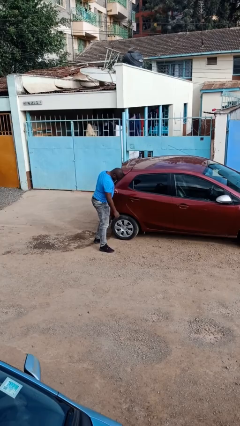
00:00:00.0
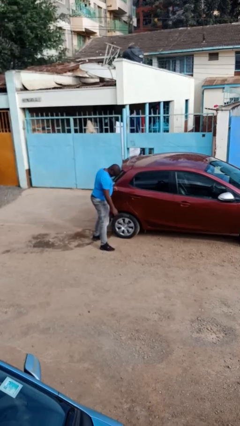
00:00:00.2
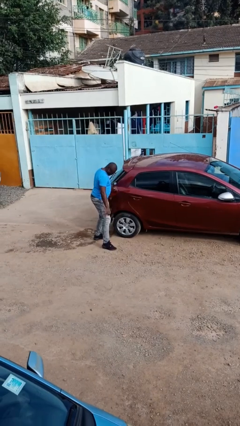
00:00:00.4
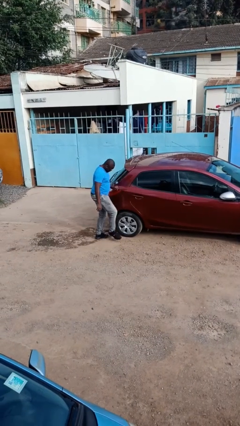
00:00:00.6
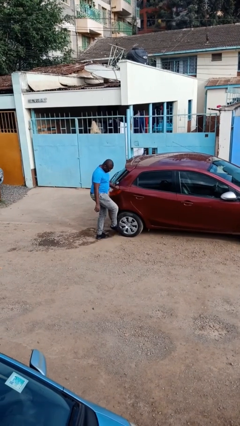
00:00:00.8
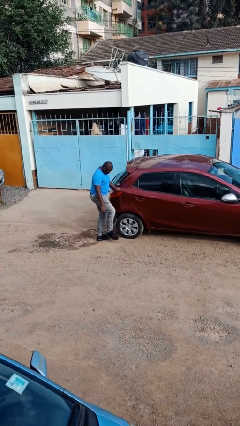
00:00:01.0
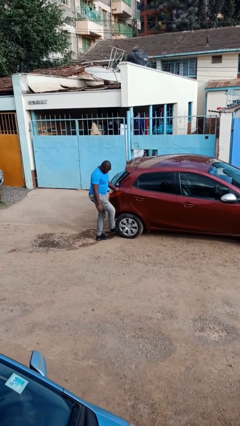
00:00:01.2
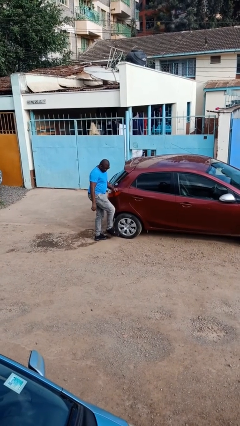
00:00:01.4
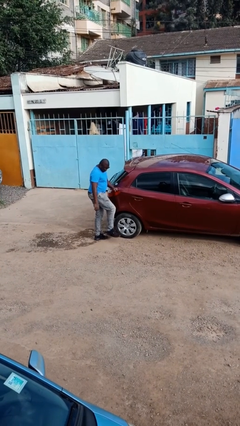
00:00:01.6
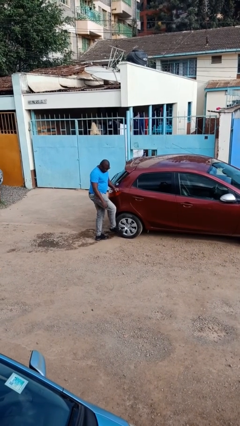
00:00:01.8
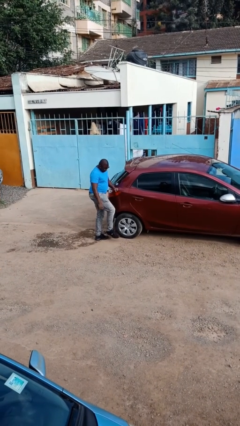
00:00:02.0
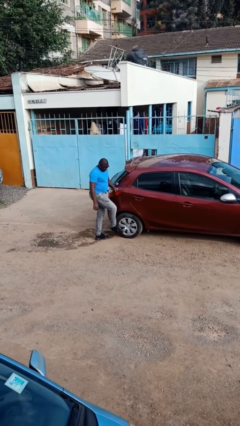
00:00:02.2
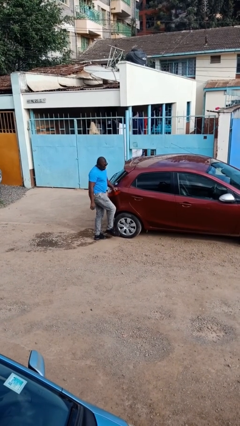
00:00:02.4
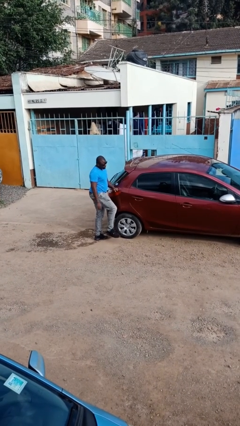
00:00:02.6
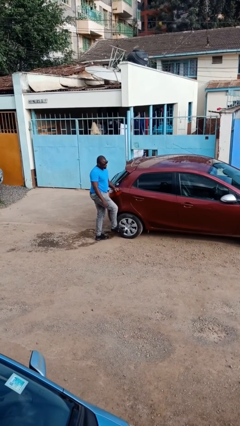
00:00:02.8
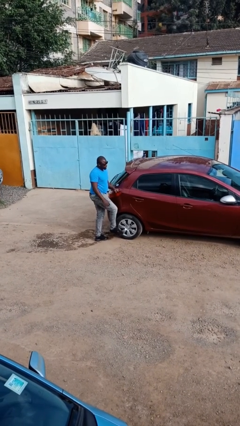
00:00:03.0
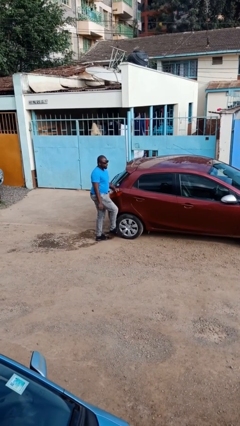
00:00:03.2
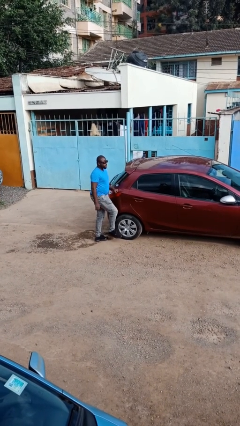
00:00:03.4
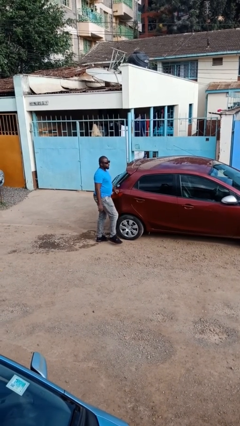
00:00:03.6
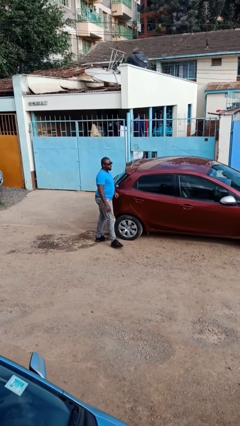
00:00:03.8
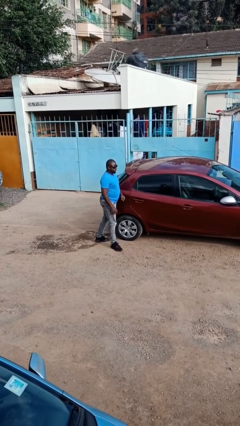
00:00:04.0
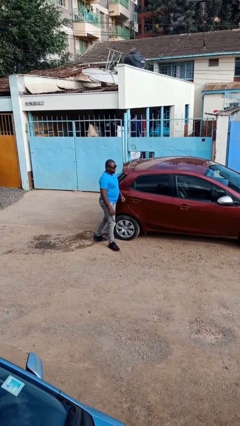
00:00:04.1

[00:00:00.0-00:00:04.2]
person kicks car tires

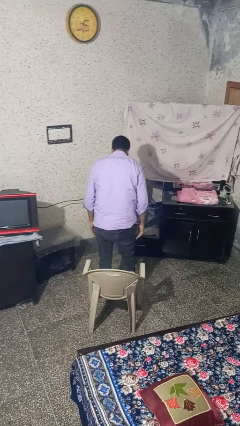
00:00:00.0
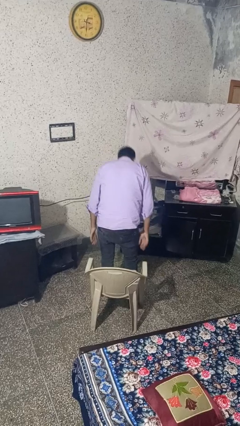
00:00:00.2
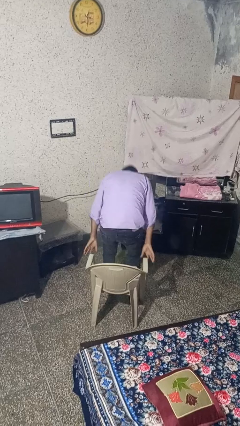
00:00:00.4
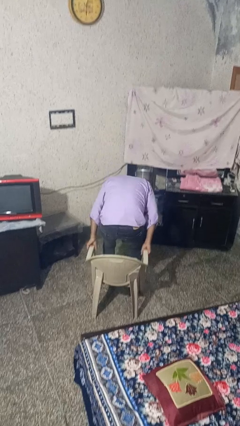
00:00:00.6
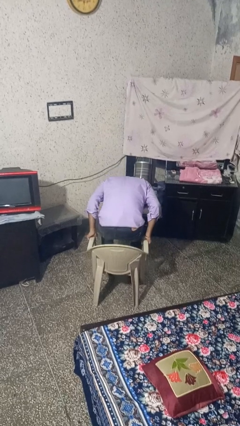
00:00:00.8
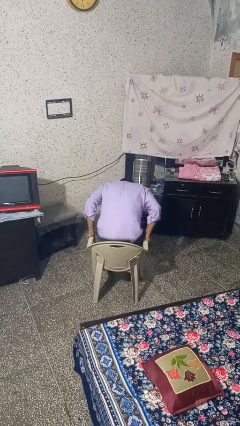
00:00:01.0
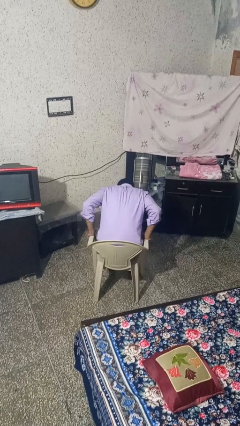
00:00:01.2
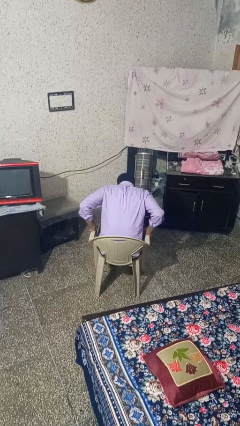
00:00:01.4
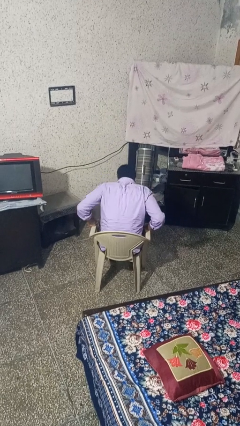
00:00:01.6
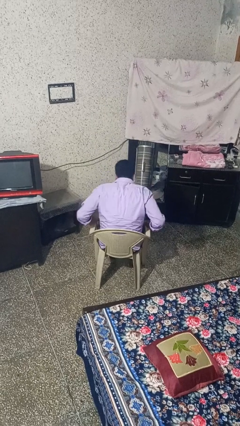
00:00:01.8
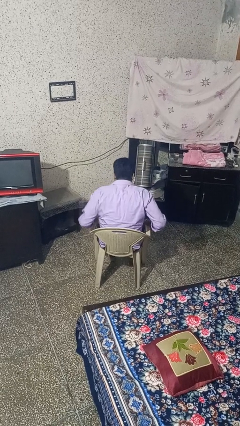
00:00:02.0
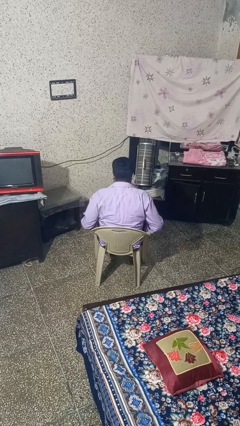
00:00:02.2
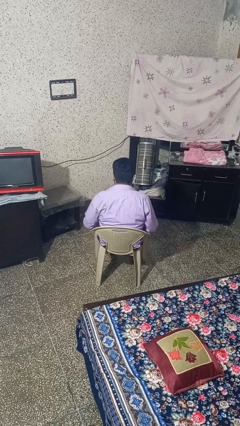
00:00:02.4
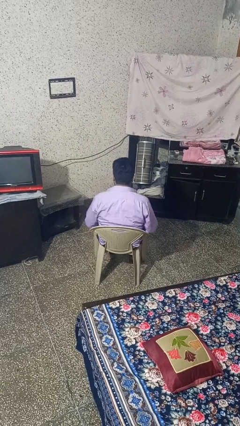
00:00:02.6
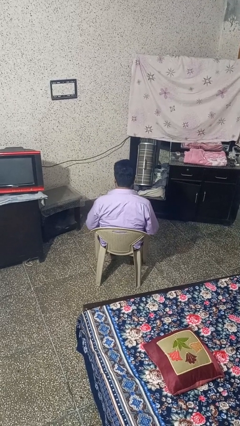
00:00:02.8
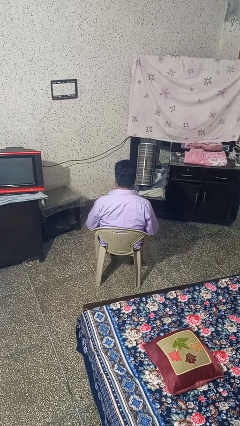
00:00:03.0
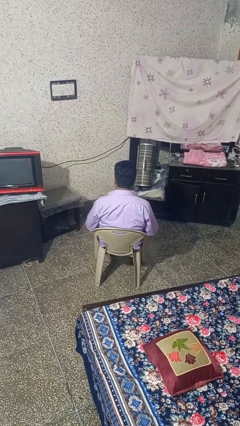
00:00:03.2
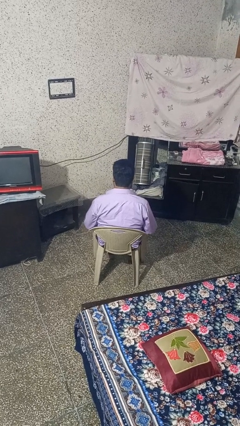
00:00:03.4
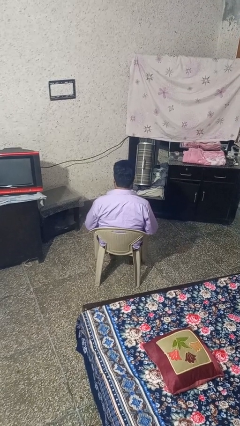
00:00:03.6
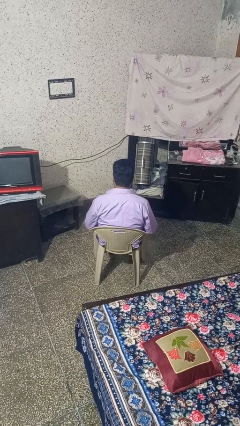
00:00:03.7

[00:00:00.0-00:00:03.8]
person sits down

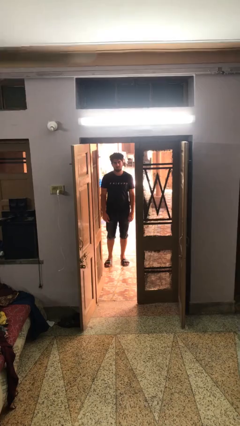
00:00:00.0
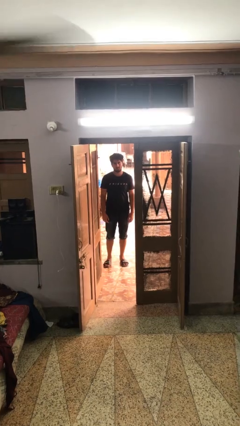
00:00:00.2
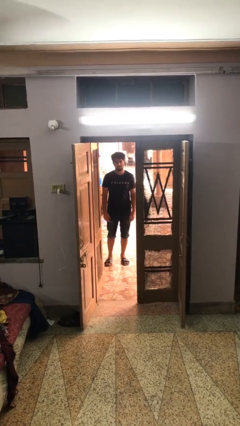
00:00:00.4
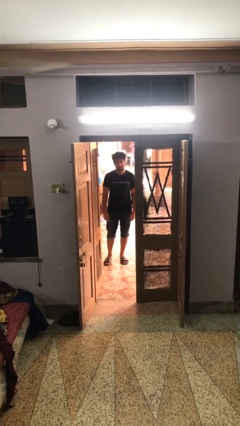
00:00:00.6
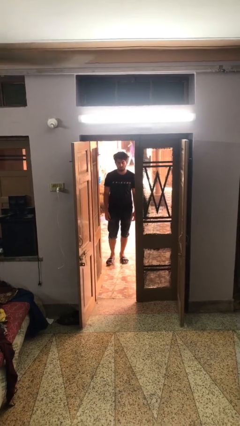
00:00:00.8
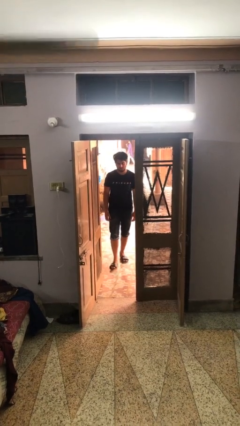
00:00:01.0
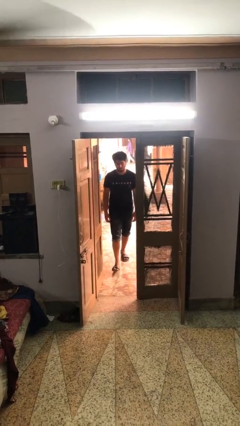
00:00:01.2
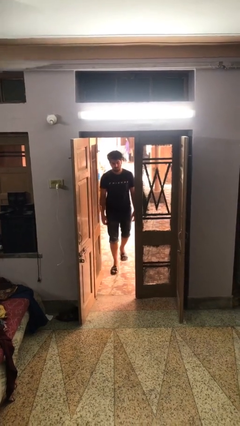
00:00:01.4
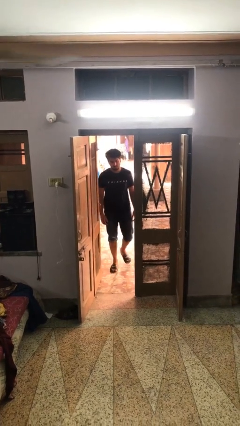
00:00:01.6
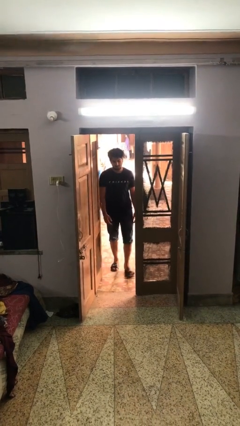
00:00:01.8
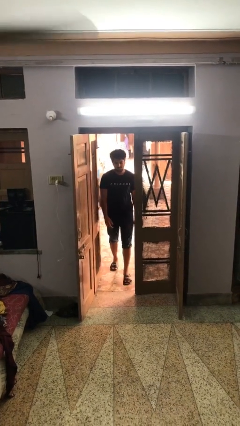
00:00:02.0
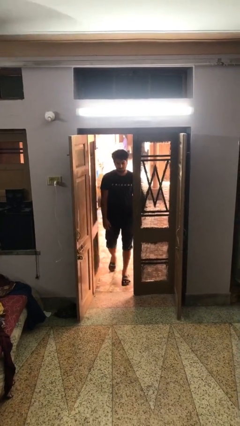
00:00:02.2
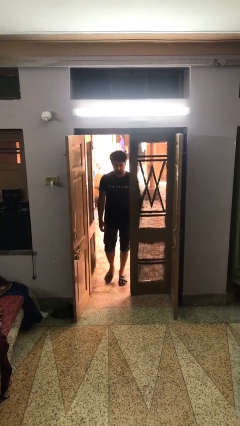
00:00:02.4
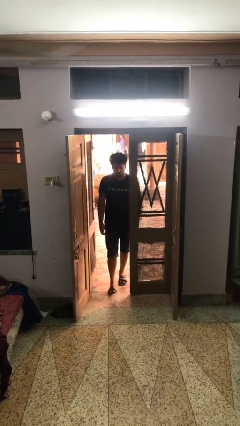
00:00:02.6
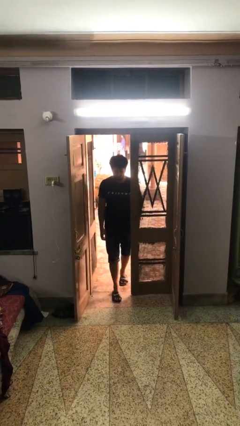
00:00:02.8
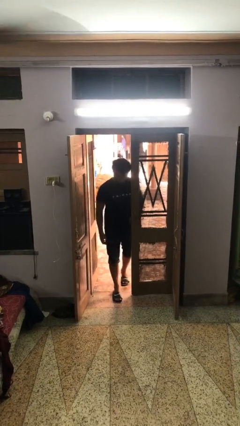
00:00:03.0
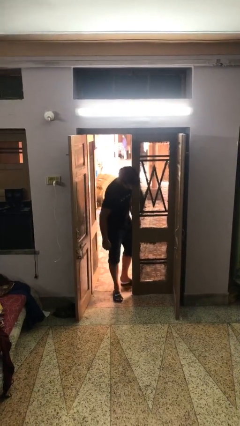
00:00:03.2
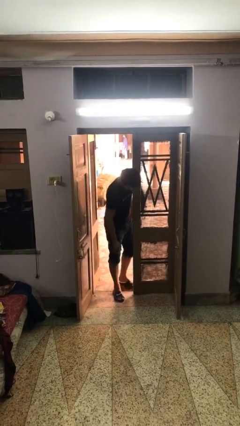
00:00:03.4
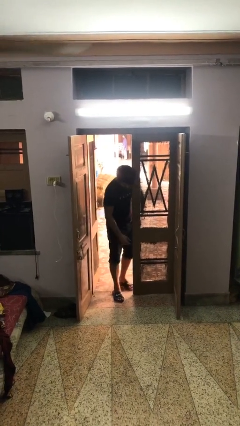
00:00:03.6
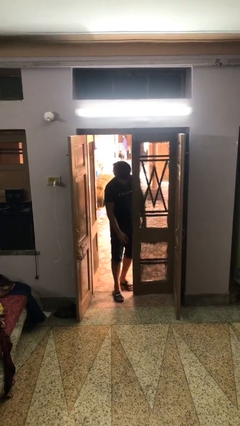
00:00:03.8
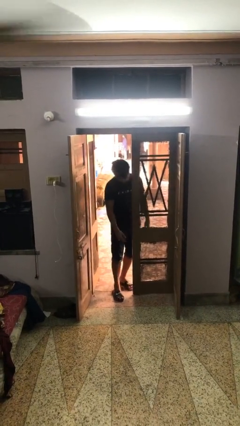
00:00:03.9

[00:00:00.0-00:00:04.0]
person bumps into wall

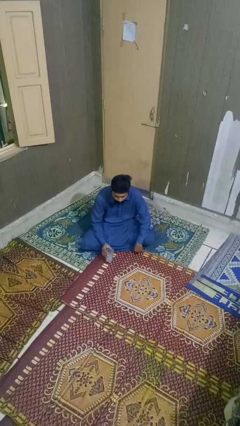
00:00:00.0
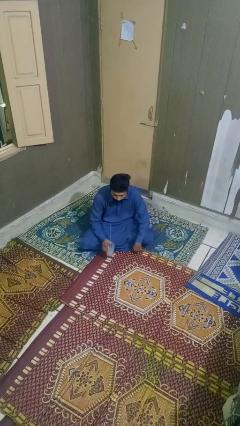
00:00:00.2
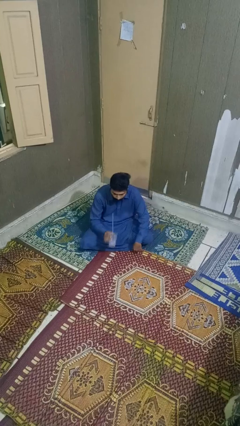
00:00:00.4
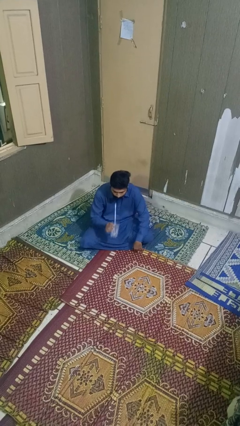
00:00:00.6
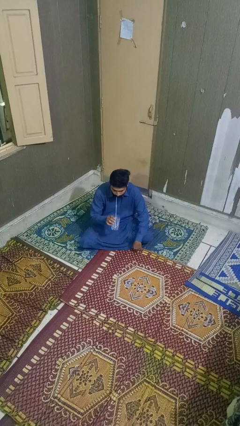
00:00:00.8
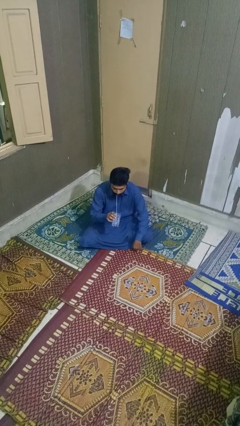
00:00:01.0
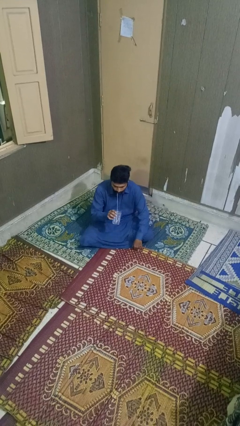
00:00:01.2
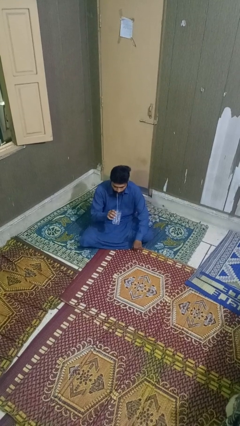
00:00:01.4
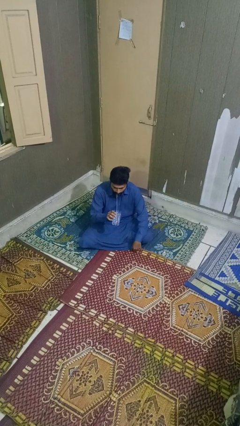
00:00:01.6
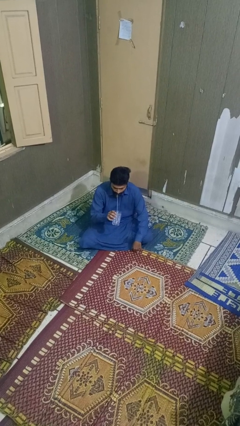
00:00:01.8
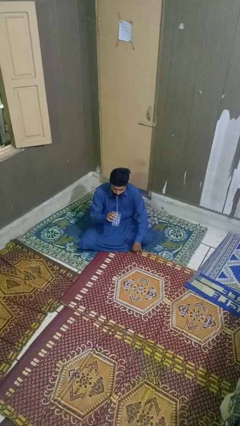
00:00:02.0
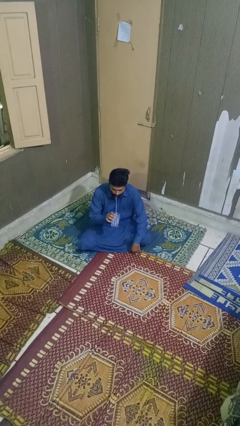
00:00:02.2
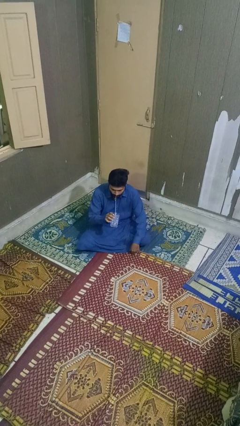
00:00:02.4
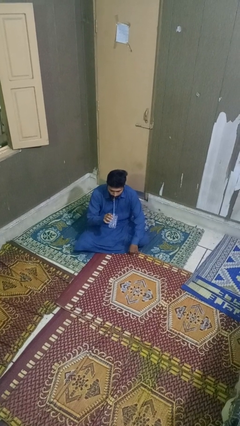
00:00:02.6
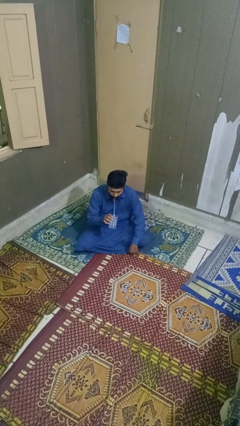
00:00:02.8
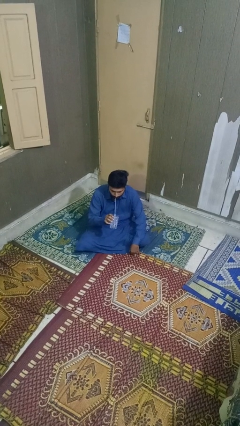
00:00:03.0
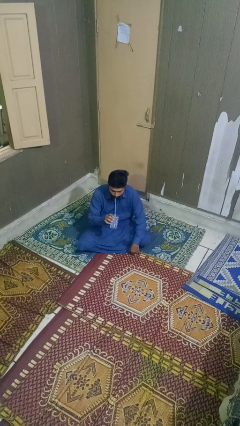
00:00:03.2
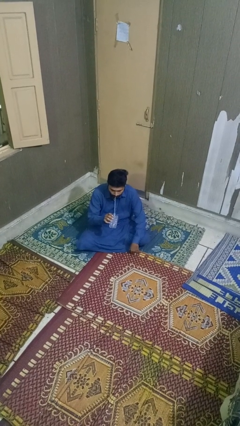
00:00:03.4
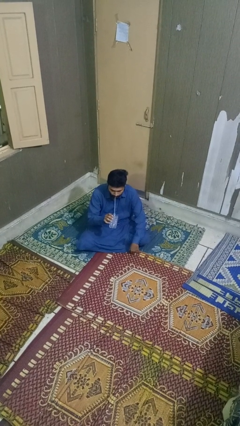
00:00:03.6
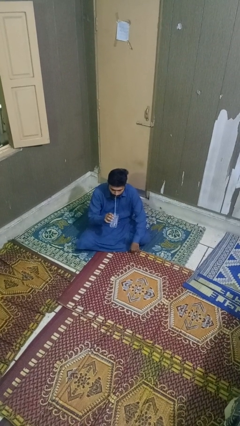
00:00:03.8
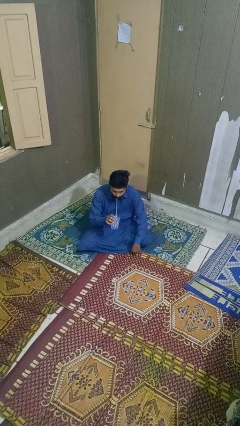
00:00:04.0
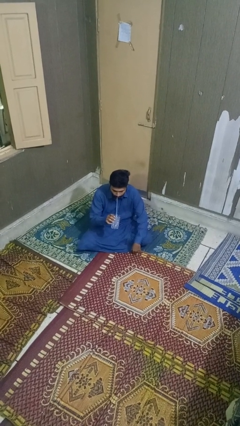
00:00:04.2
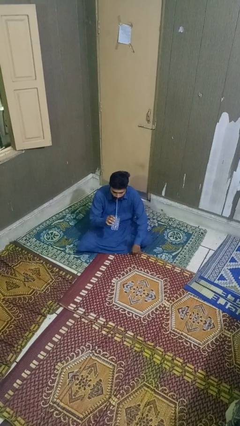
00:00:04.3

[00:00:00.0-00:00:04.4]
person drinks from straw

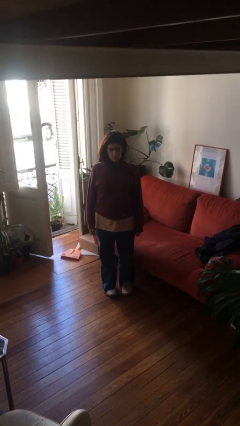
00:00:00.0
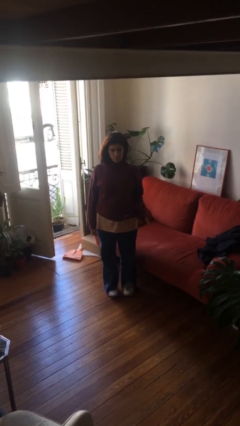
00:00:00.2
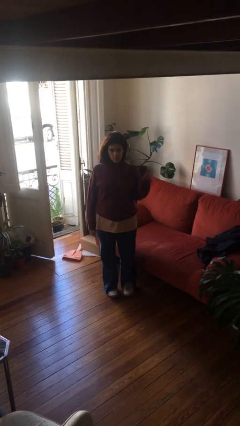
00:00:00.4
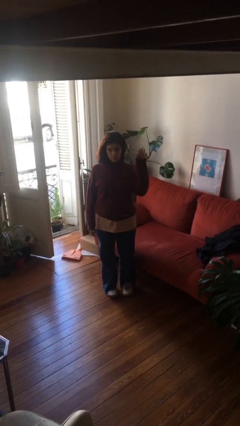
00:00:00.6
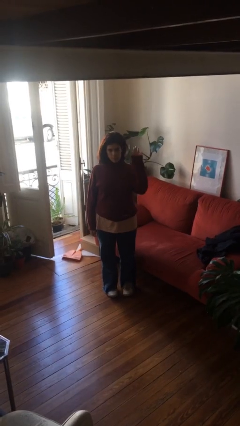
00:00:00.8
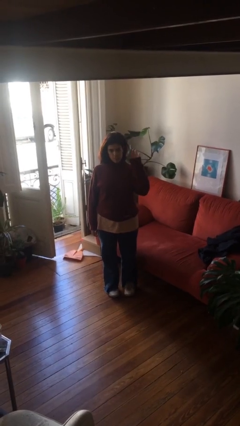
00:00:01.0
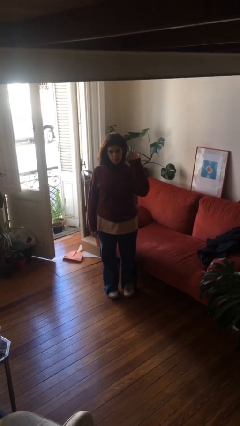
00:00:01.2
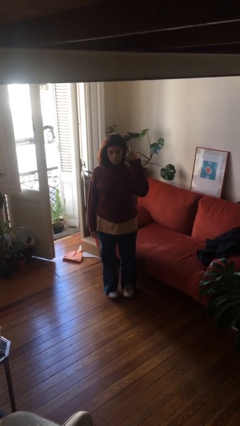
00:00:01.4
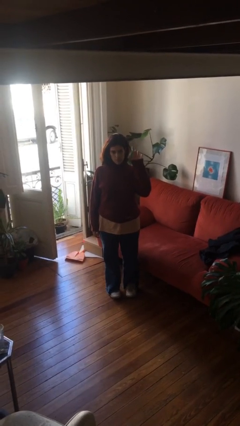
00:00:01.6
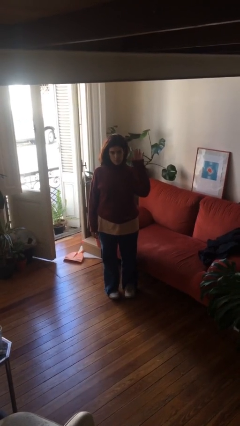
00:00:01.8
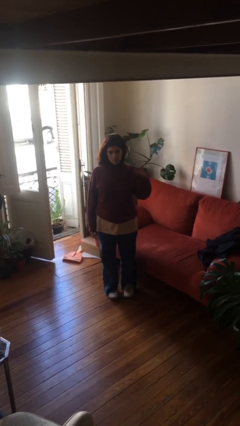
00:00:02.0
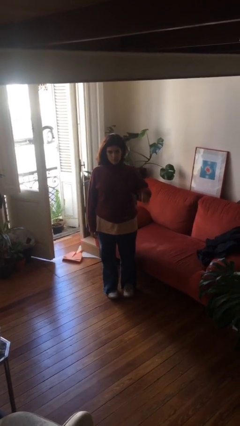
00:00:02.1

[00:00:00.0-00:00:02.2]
person gestures raise hand
